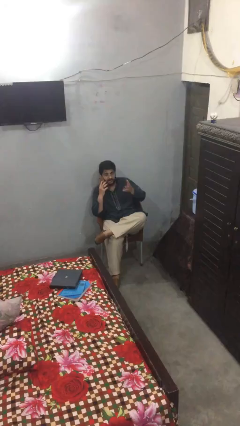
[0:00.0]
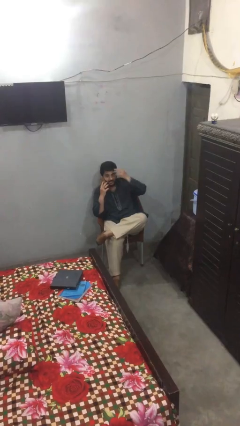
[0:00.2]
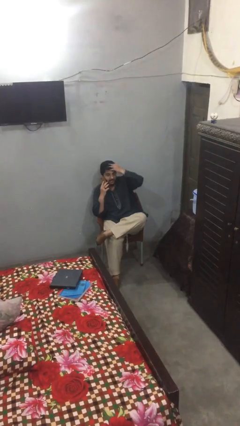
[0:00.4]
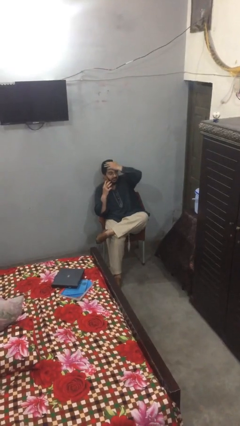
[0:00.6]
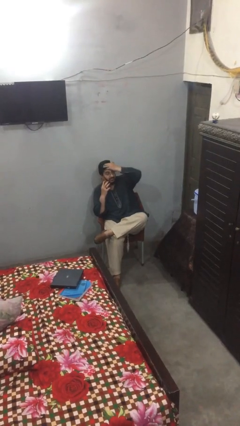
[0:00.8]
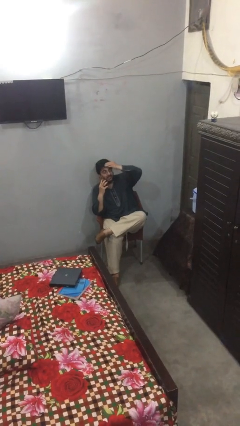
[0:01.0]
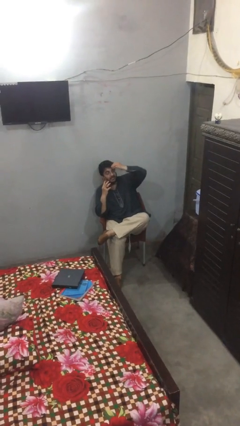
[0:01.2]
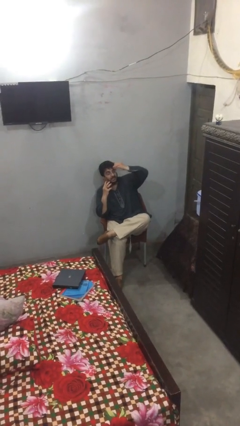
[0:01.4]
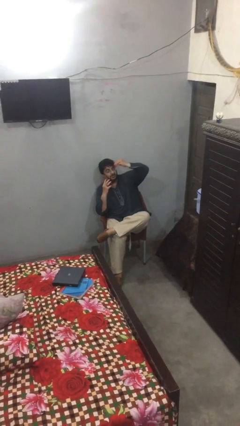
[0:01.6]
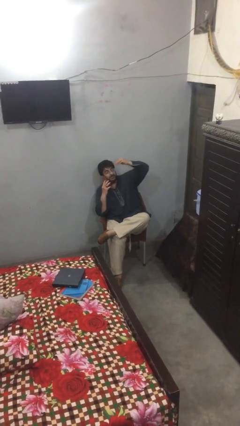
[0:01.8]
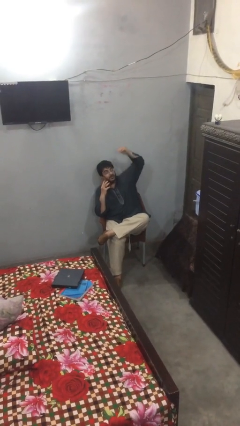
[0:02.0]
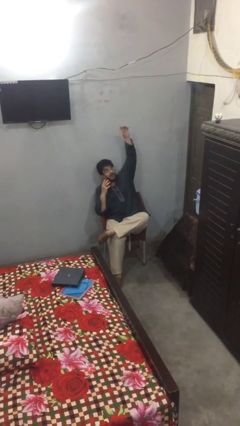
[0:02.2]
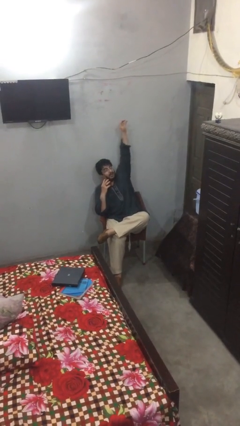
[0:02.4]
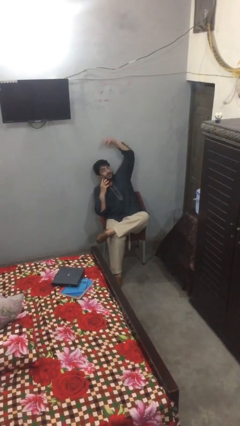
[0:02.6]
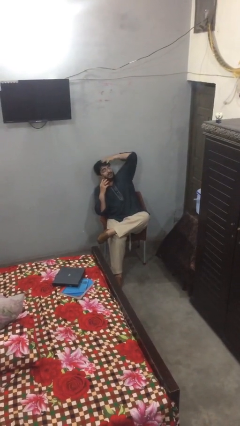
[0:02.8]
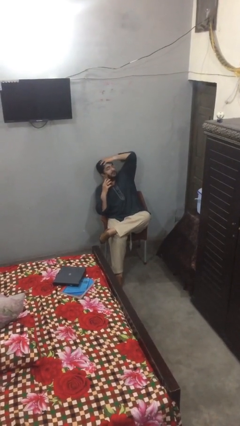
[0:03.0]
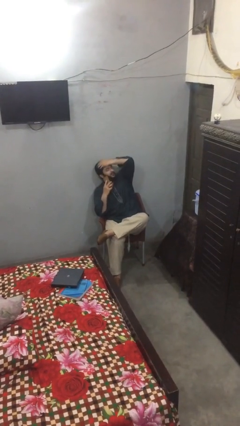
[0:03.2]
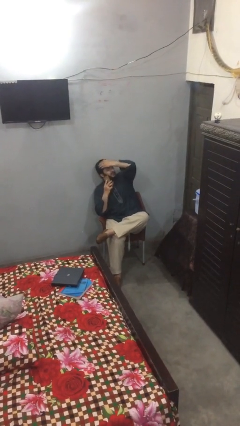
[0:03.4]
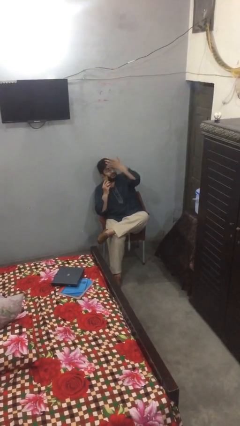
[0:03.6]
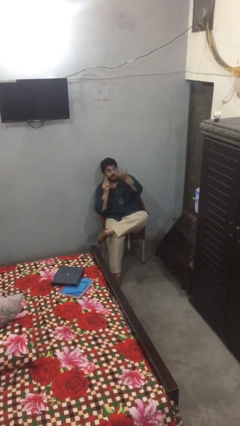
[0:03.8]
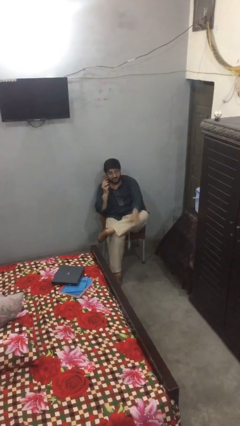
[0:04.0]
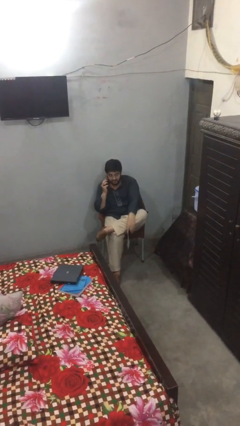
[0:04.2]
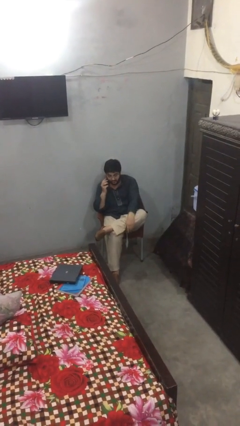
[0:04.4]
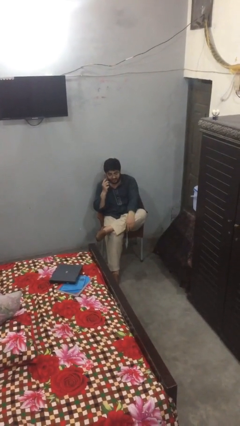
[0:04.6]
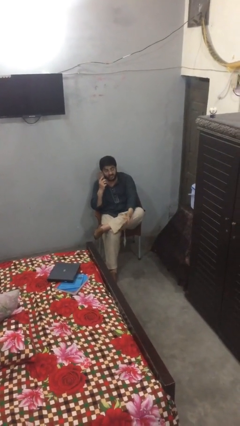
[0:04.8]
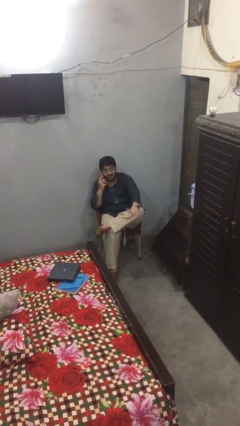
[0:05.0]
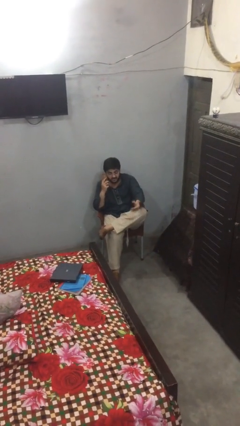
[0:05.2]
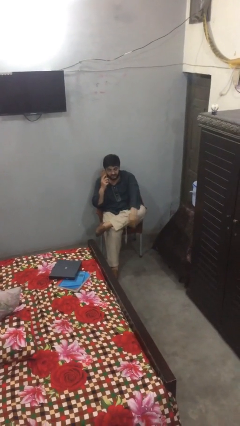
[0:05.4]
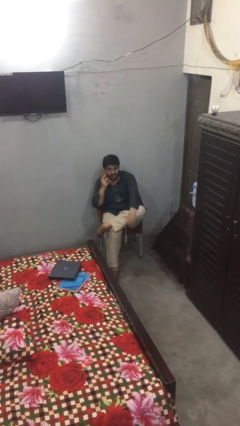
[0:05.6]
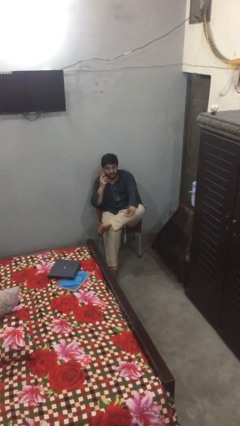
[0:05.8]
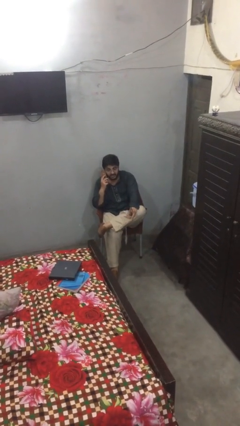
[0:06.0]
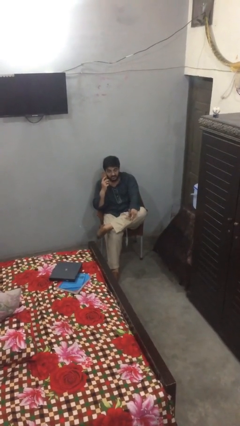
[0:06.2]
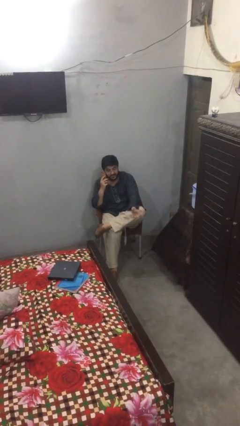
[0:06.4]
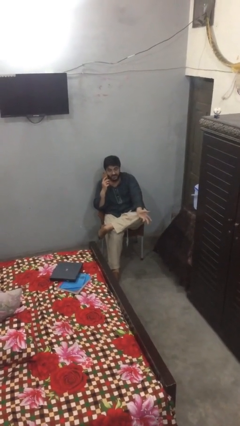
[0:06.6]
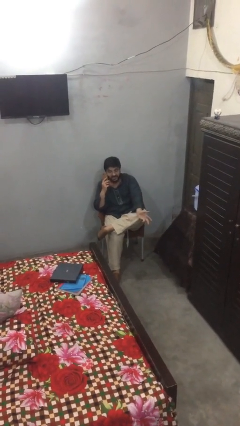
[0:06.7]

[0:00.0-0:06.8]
person talks on phone

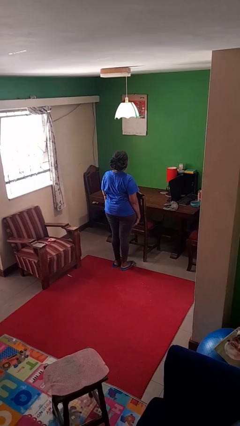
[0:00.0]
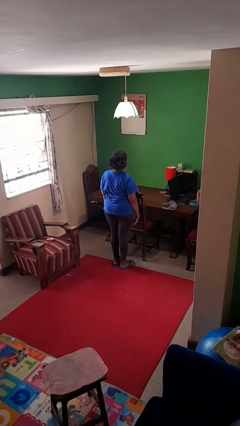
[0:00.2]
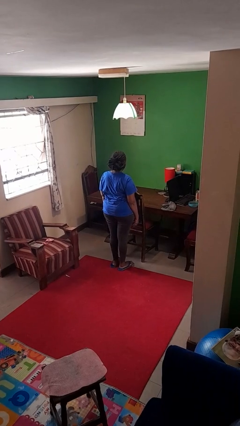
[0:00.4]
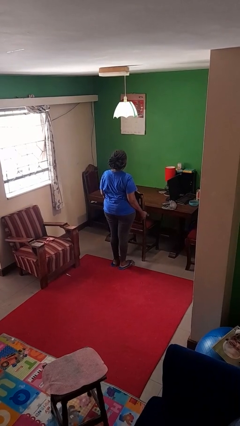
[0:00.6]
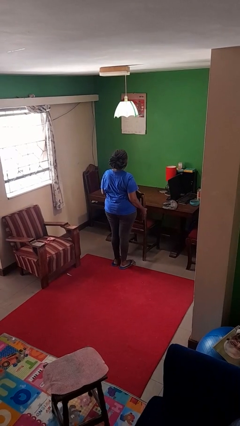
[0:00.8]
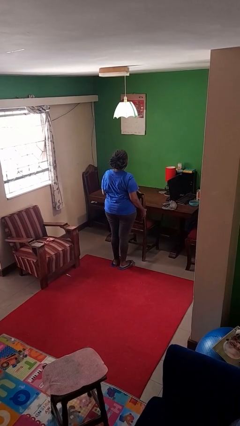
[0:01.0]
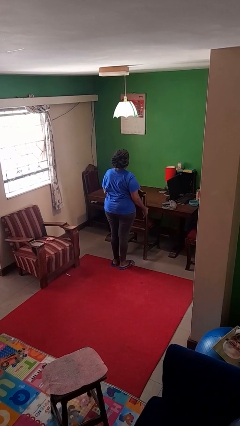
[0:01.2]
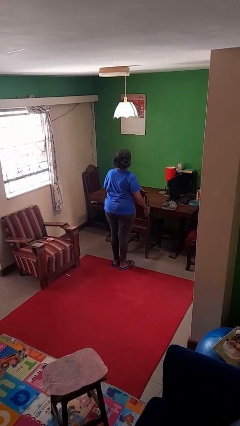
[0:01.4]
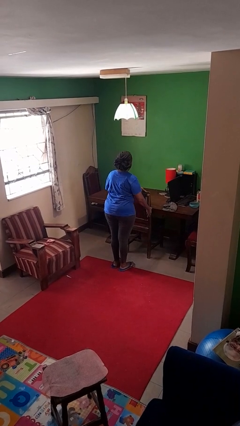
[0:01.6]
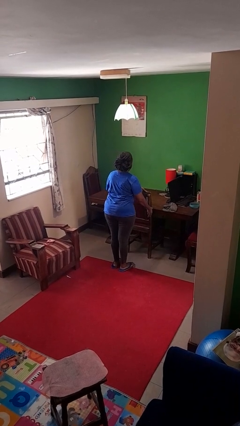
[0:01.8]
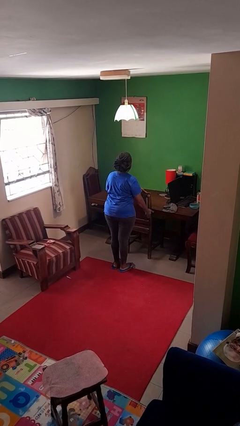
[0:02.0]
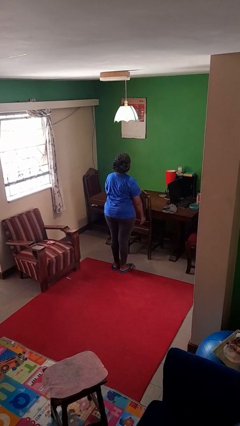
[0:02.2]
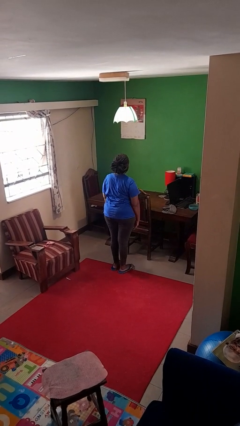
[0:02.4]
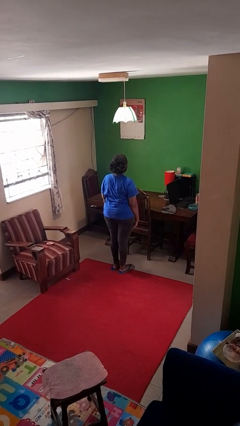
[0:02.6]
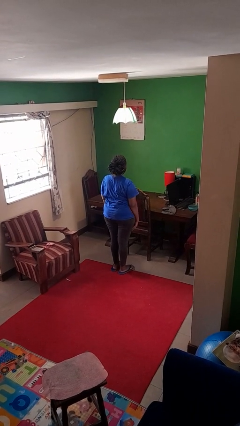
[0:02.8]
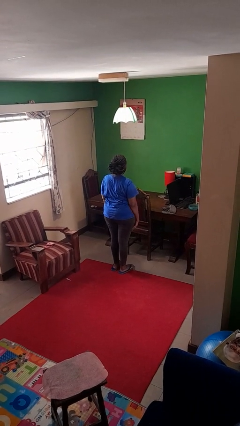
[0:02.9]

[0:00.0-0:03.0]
person pushes in chair

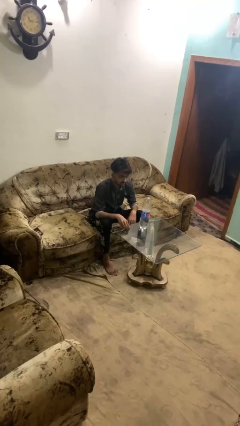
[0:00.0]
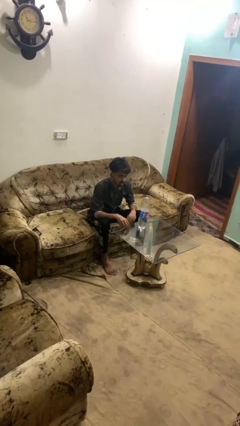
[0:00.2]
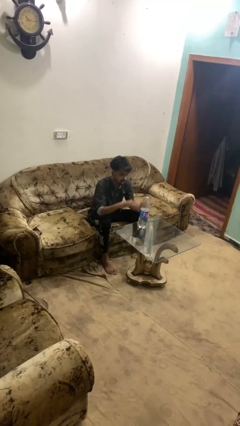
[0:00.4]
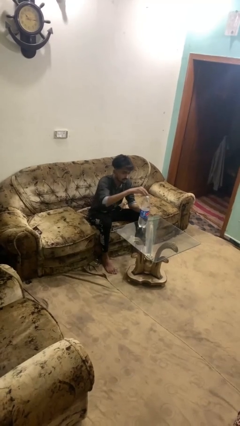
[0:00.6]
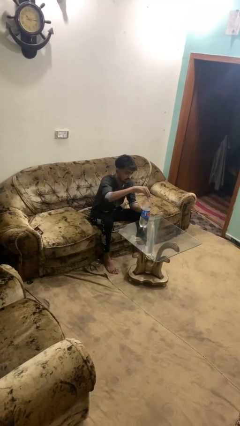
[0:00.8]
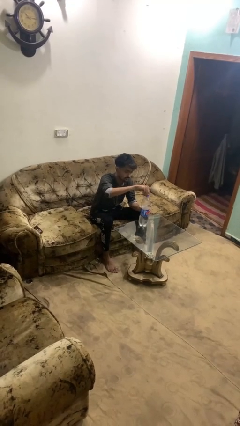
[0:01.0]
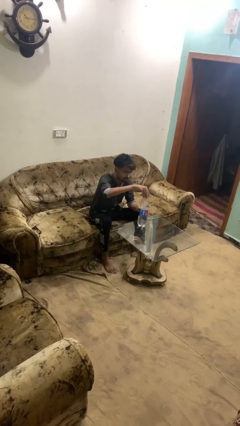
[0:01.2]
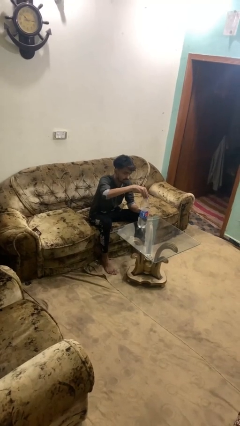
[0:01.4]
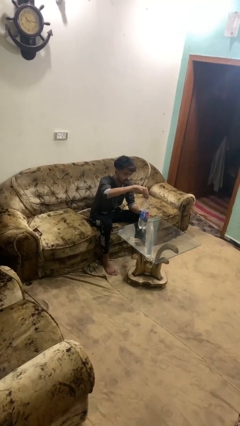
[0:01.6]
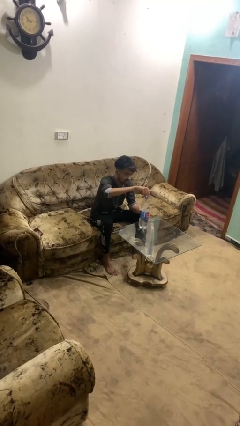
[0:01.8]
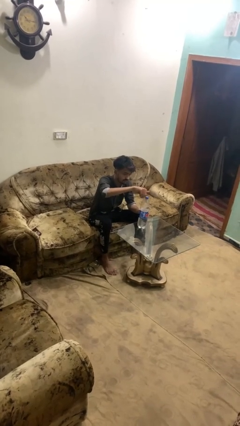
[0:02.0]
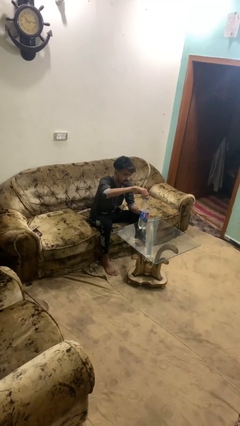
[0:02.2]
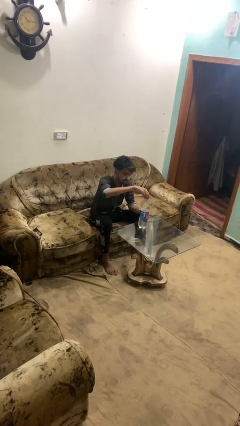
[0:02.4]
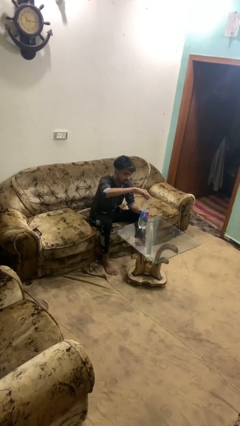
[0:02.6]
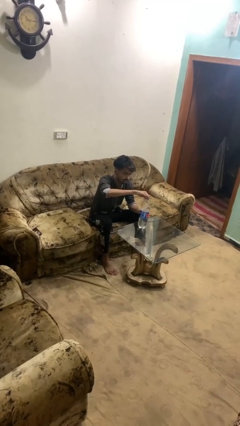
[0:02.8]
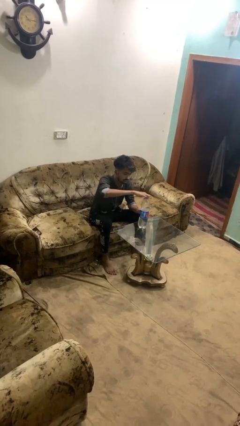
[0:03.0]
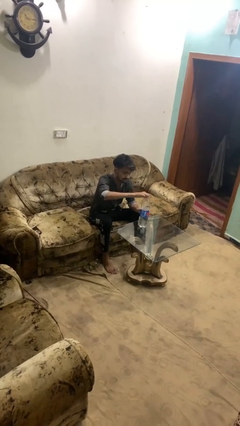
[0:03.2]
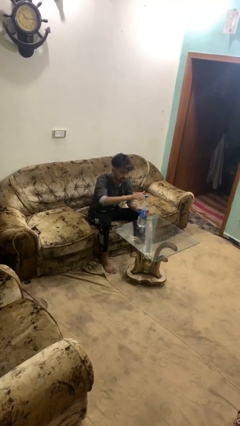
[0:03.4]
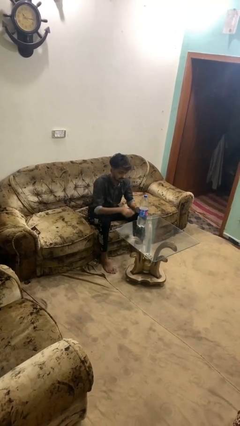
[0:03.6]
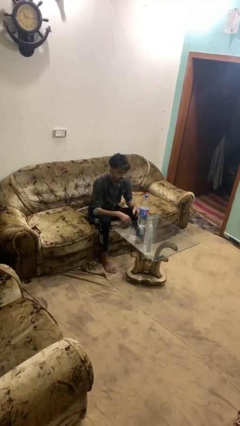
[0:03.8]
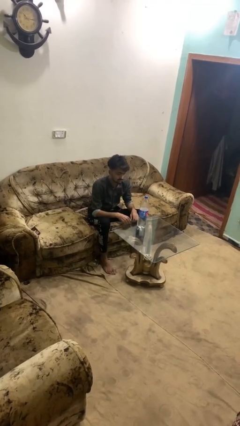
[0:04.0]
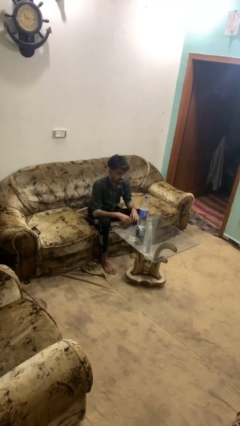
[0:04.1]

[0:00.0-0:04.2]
person screws lid to bottle

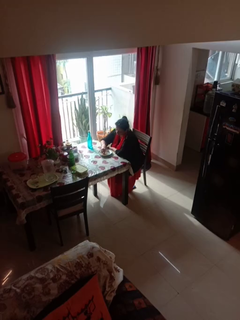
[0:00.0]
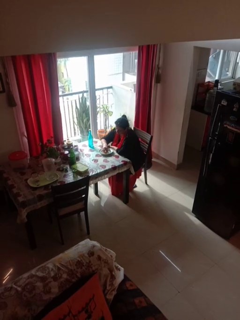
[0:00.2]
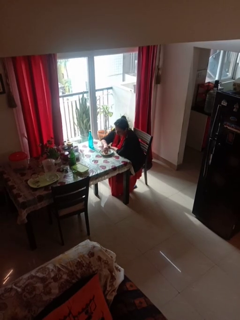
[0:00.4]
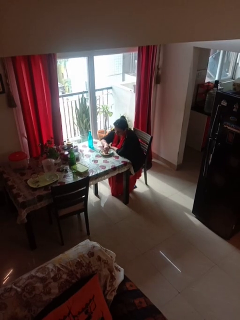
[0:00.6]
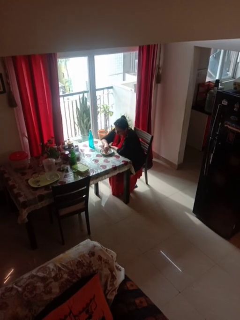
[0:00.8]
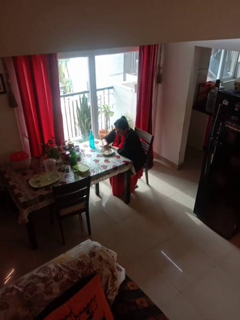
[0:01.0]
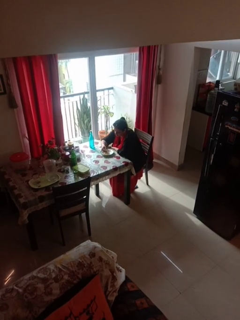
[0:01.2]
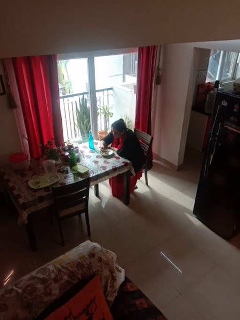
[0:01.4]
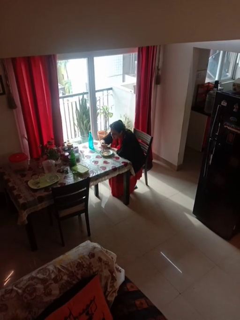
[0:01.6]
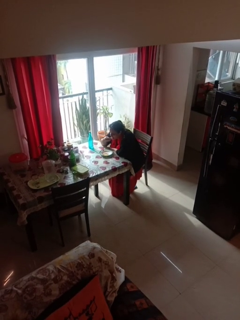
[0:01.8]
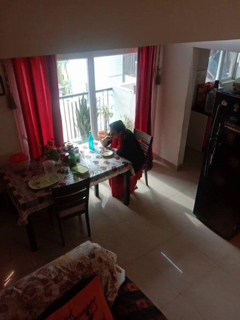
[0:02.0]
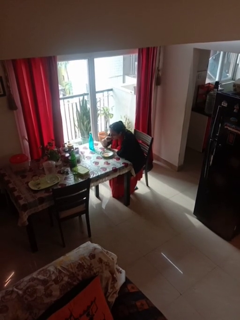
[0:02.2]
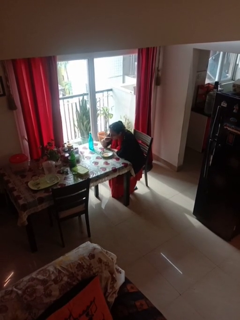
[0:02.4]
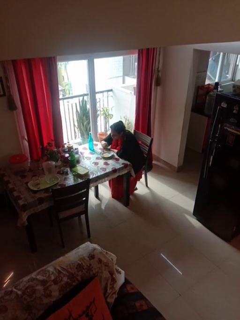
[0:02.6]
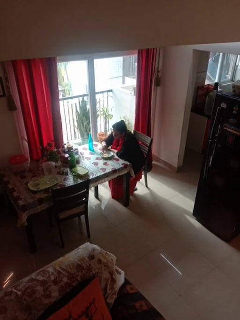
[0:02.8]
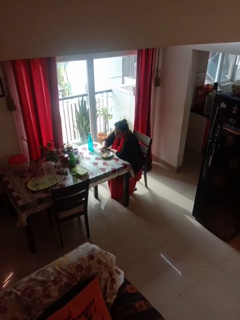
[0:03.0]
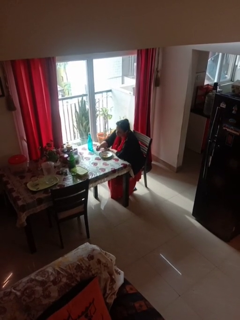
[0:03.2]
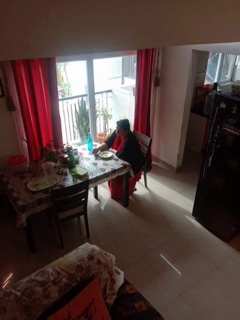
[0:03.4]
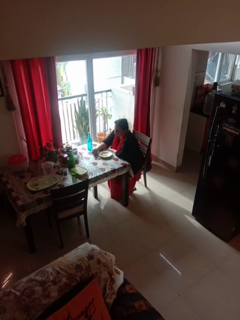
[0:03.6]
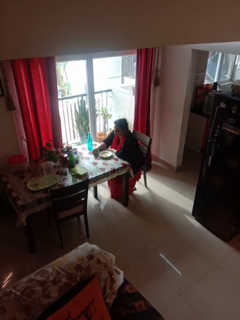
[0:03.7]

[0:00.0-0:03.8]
person eats with hands

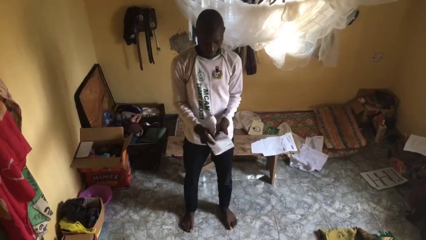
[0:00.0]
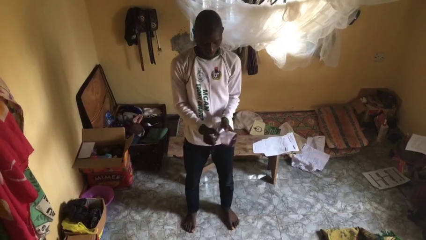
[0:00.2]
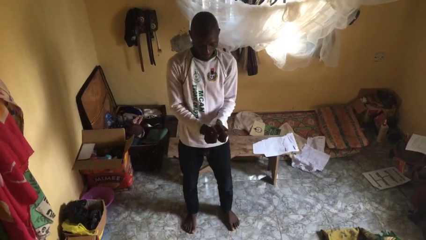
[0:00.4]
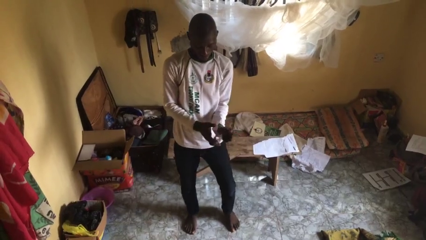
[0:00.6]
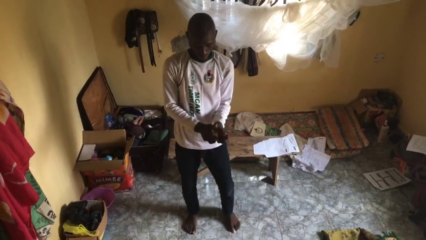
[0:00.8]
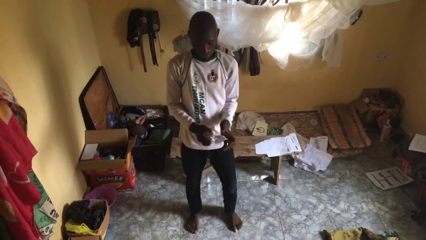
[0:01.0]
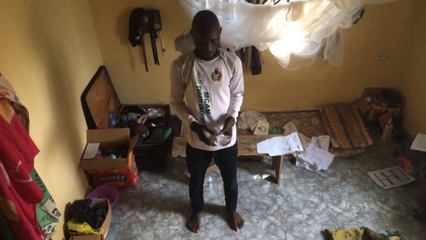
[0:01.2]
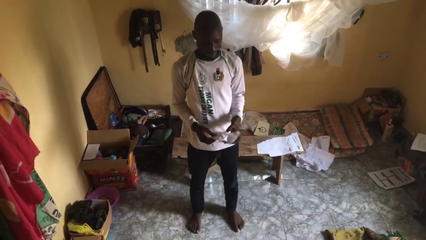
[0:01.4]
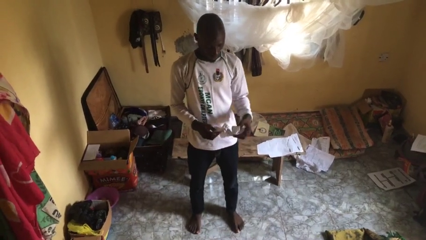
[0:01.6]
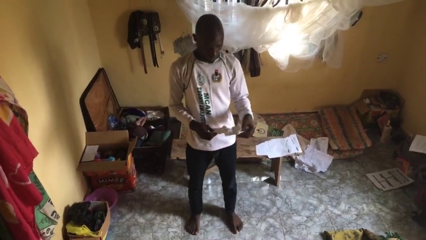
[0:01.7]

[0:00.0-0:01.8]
person crumples paper
